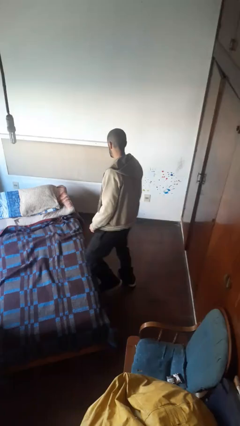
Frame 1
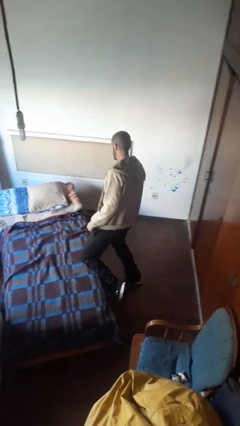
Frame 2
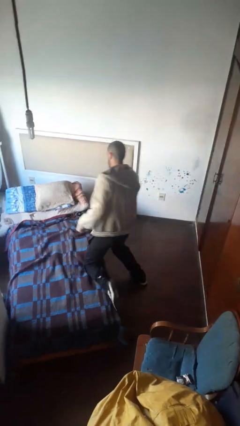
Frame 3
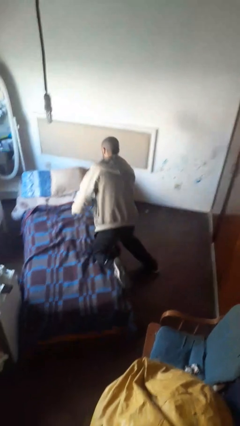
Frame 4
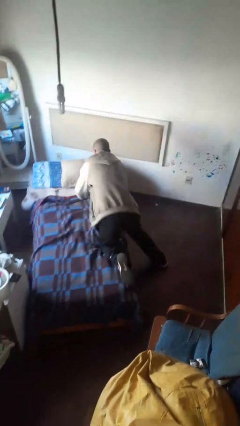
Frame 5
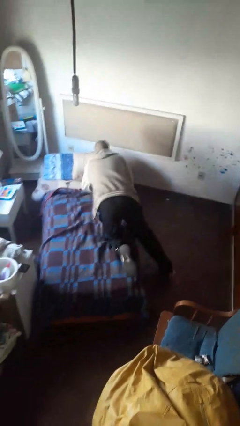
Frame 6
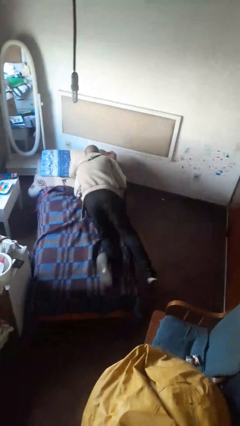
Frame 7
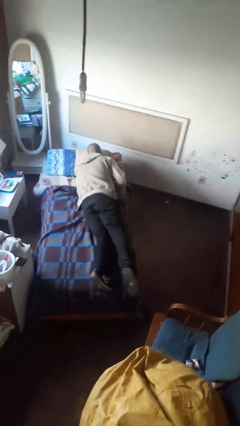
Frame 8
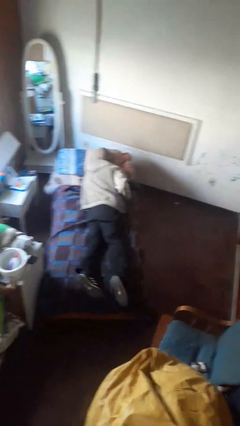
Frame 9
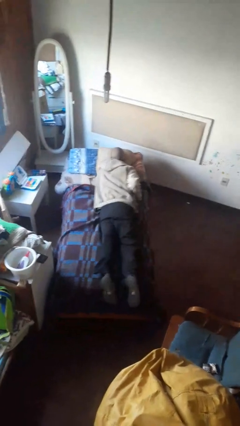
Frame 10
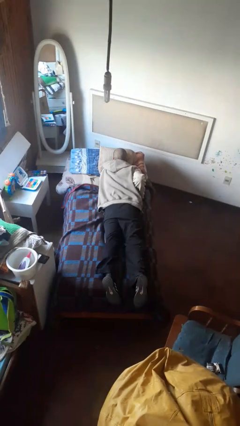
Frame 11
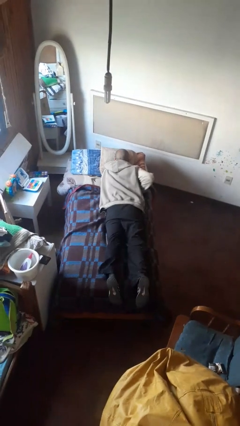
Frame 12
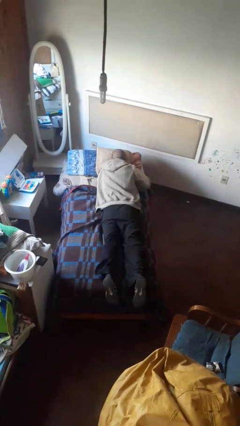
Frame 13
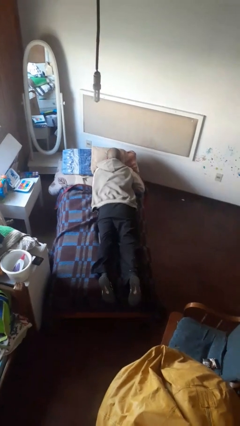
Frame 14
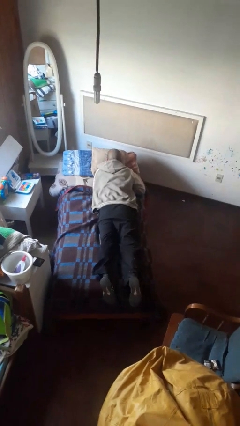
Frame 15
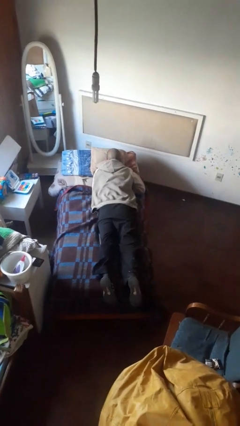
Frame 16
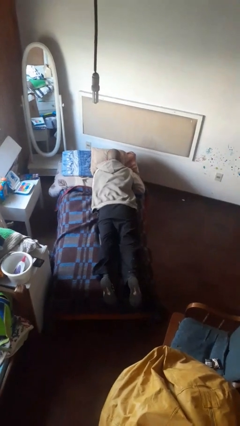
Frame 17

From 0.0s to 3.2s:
person lies down on bed

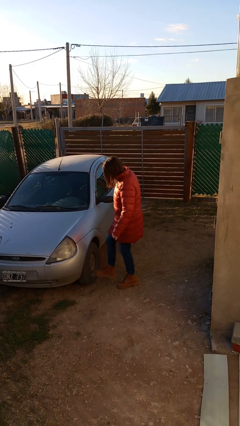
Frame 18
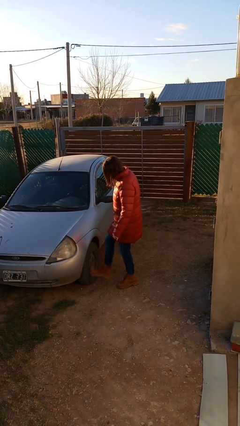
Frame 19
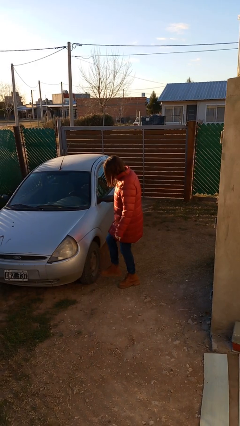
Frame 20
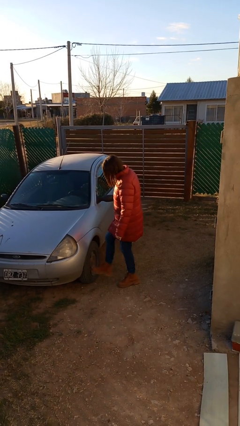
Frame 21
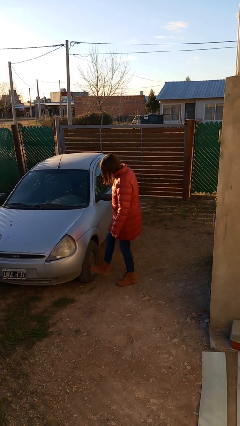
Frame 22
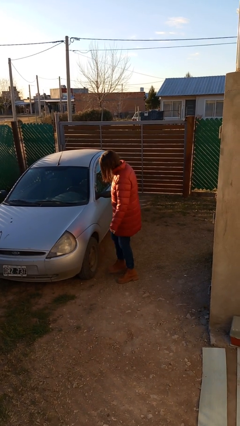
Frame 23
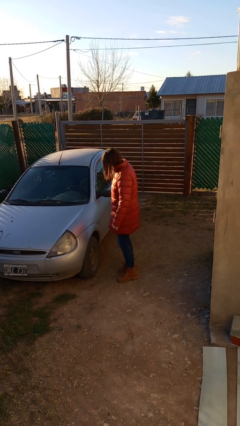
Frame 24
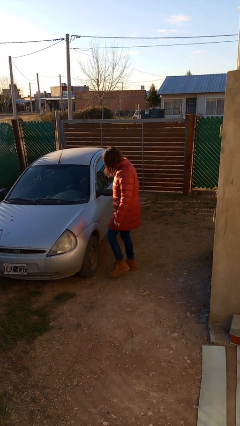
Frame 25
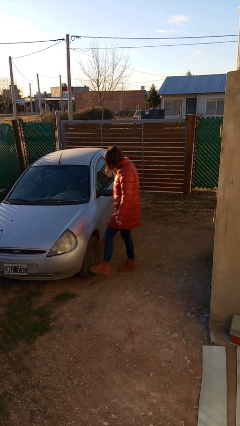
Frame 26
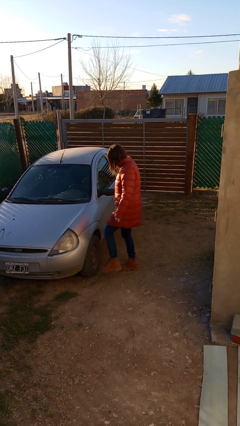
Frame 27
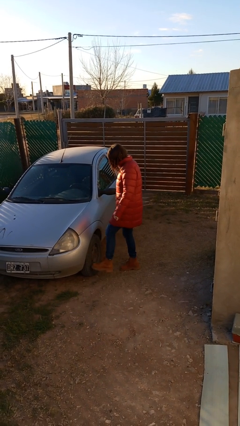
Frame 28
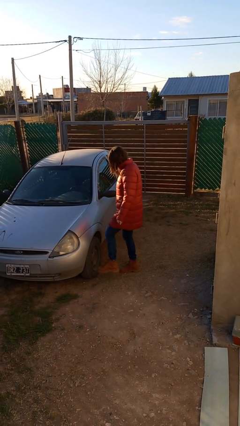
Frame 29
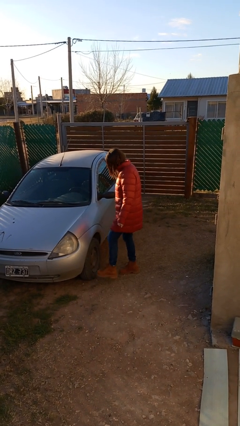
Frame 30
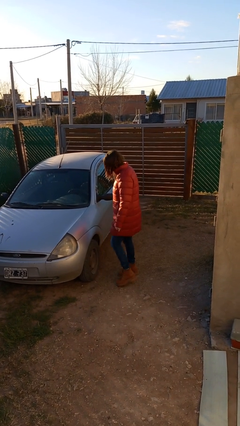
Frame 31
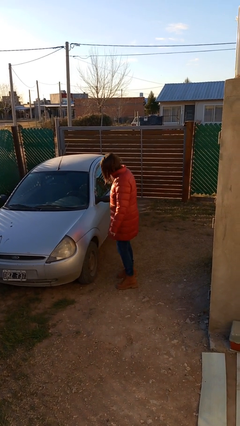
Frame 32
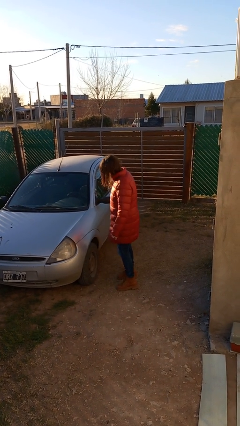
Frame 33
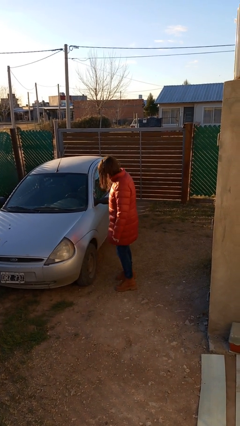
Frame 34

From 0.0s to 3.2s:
person kicks car tires

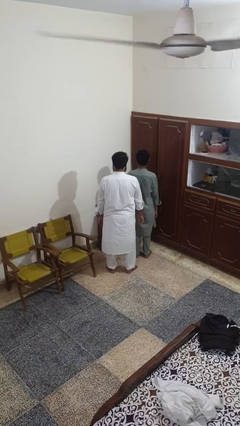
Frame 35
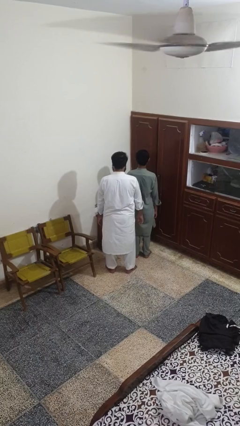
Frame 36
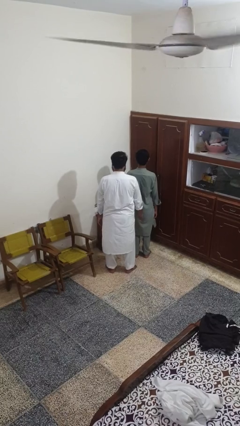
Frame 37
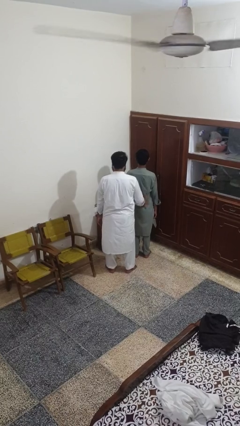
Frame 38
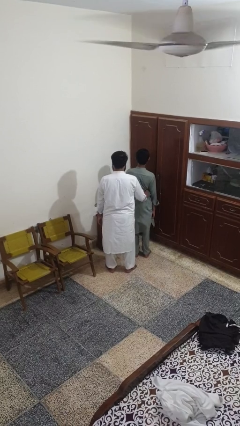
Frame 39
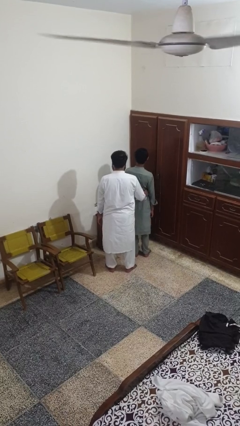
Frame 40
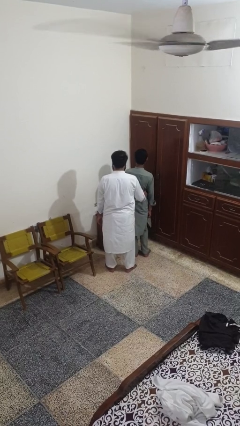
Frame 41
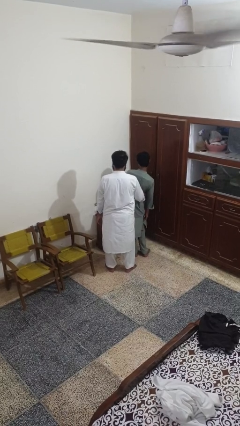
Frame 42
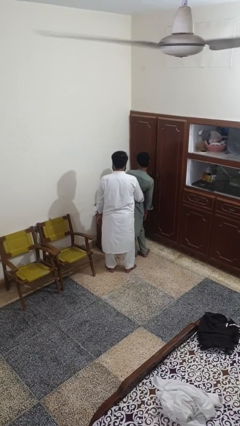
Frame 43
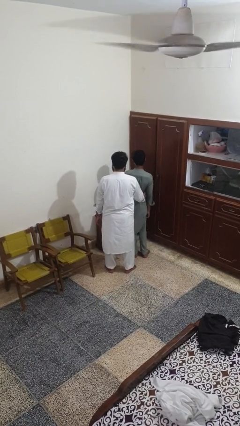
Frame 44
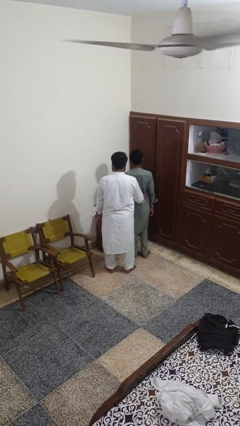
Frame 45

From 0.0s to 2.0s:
person tickles person

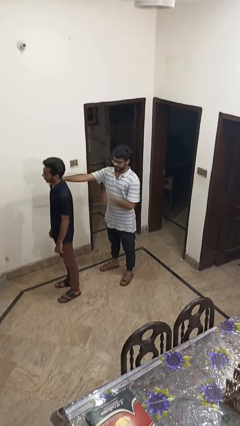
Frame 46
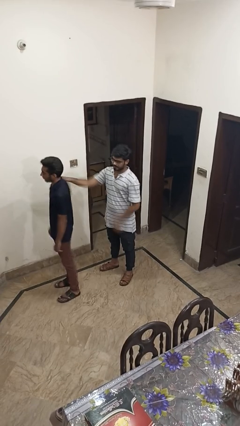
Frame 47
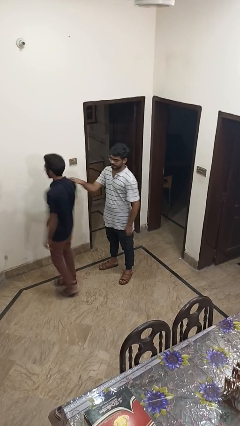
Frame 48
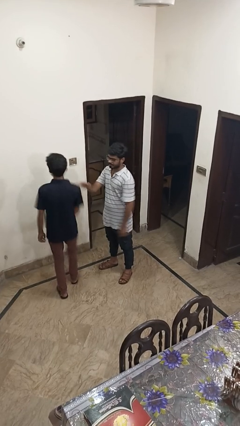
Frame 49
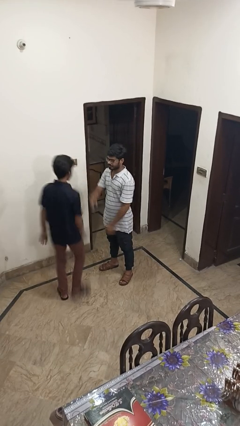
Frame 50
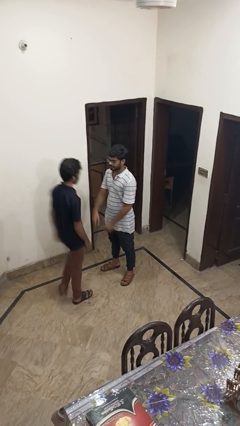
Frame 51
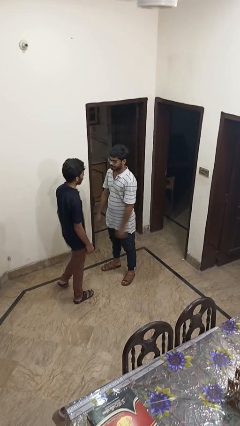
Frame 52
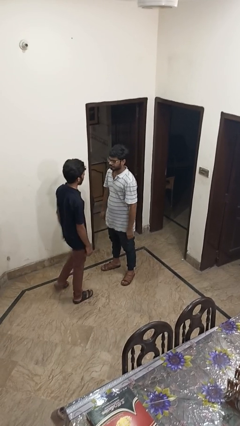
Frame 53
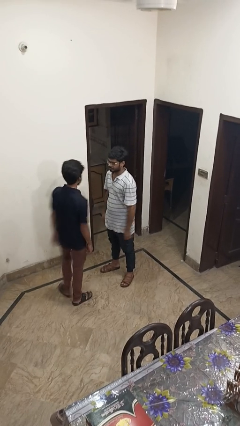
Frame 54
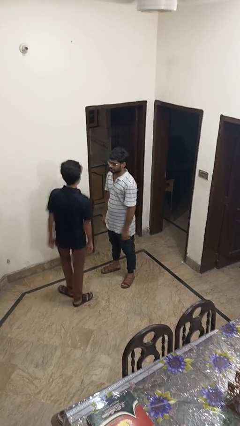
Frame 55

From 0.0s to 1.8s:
person spins person around

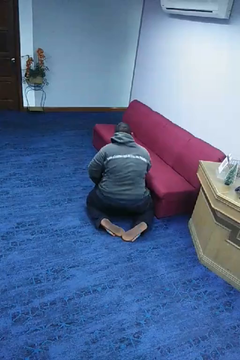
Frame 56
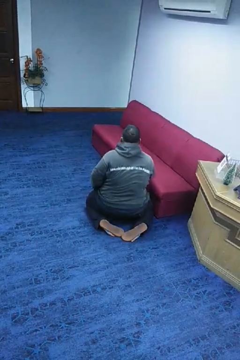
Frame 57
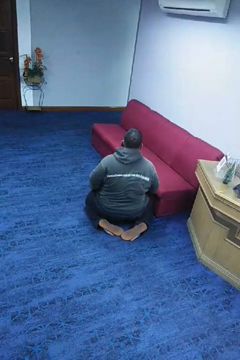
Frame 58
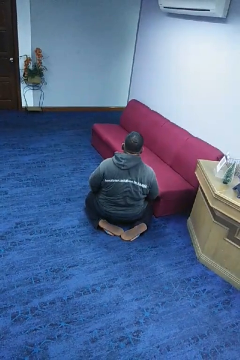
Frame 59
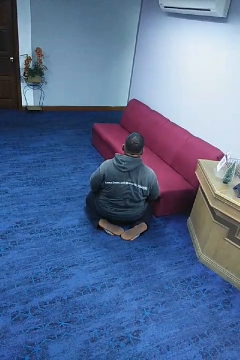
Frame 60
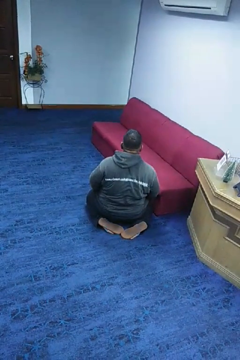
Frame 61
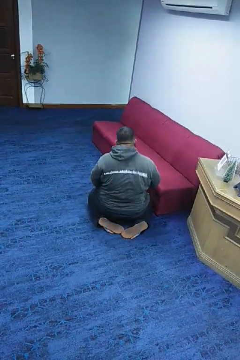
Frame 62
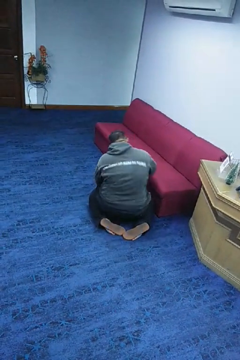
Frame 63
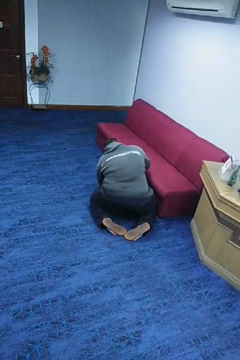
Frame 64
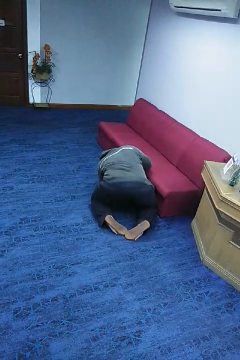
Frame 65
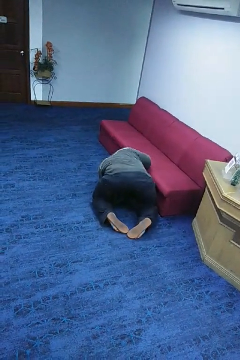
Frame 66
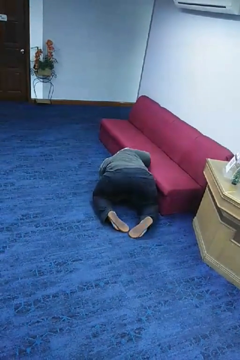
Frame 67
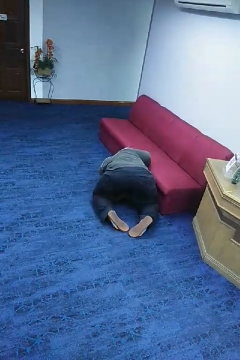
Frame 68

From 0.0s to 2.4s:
person searches under couch

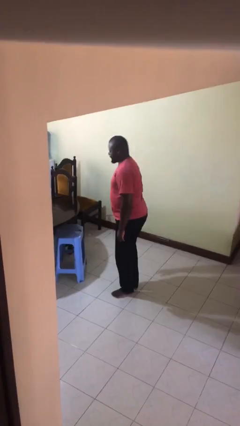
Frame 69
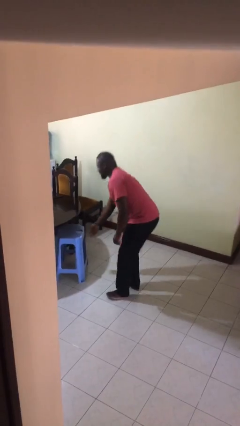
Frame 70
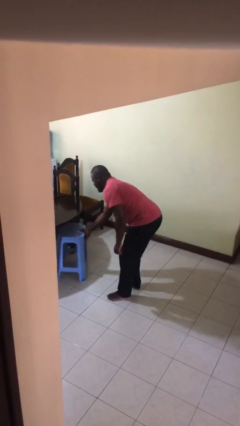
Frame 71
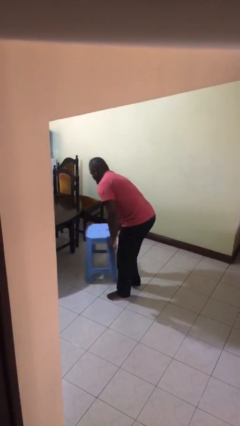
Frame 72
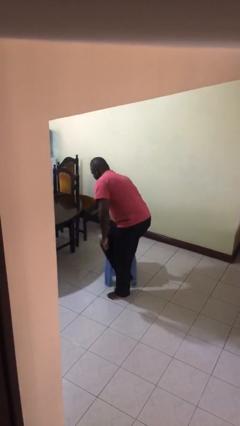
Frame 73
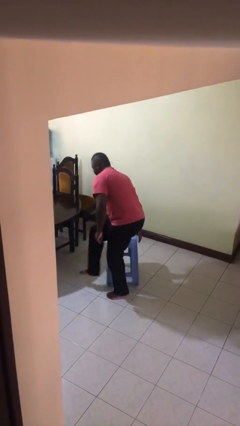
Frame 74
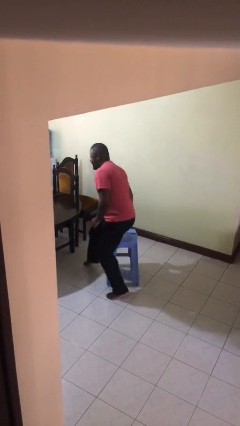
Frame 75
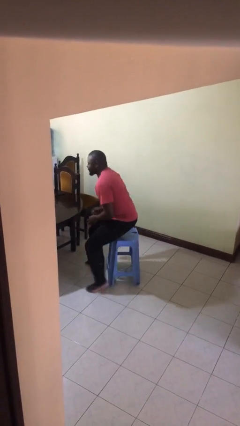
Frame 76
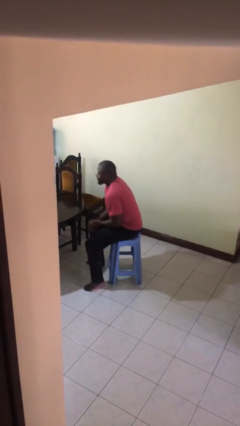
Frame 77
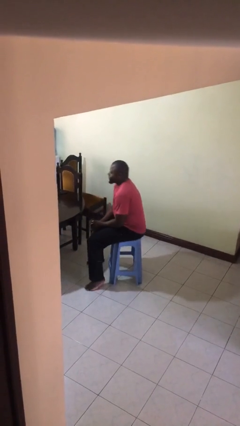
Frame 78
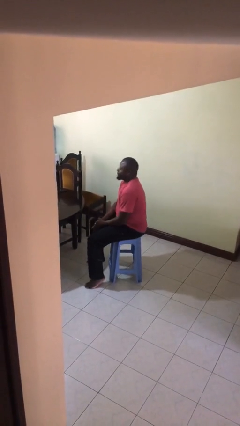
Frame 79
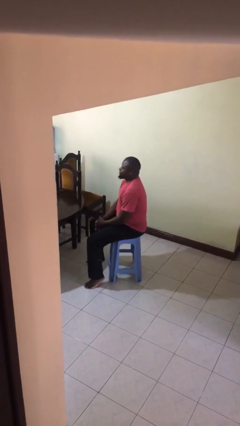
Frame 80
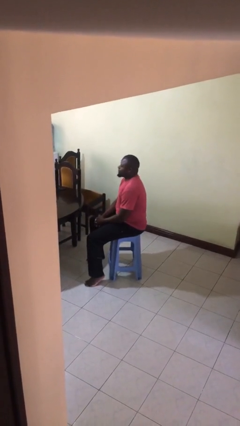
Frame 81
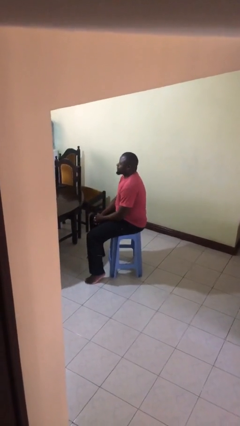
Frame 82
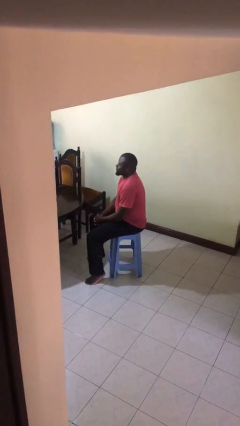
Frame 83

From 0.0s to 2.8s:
person sits down

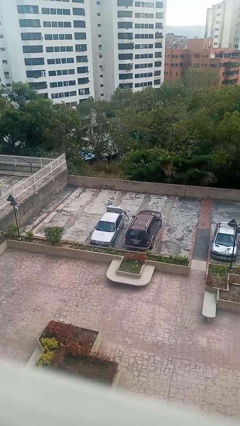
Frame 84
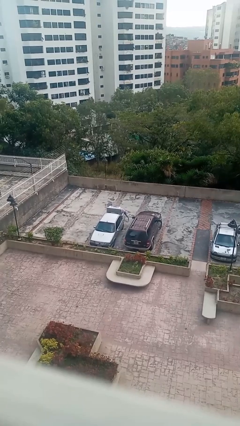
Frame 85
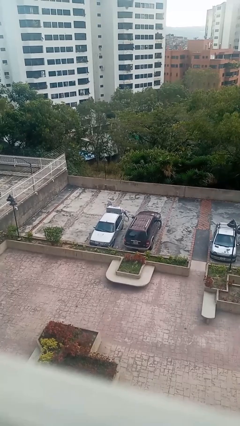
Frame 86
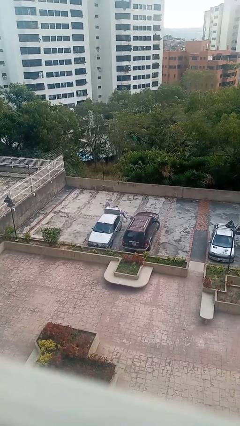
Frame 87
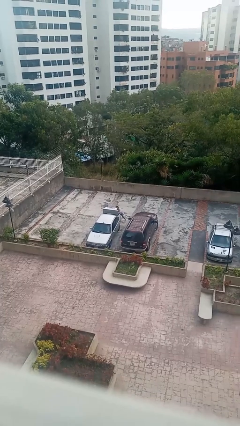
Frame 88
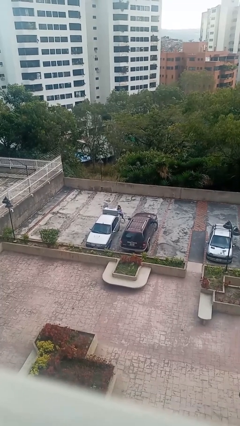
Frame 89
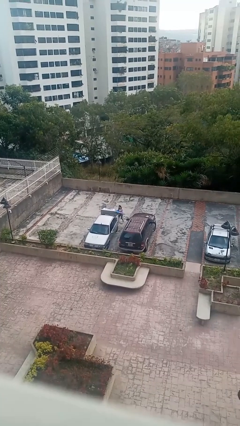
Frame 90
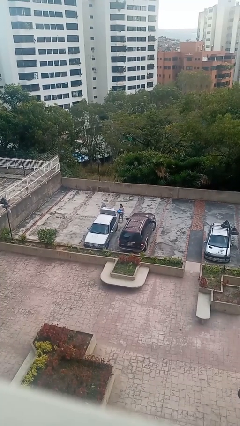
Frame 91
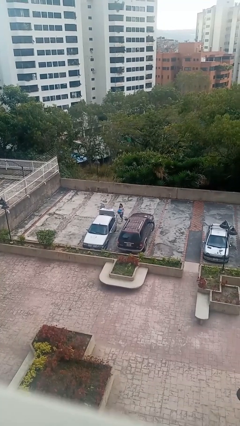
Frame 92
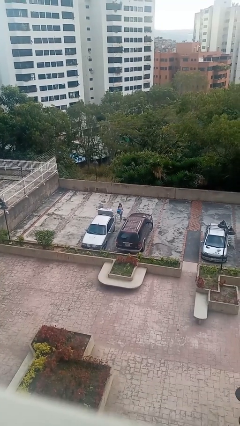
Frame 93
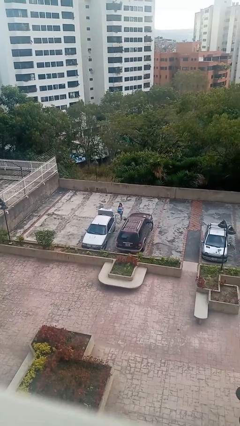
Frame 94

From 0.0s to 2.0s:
person unloads car

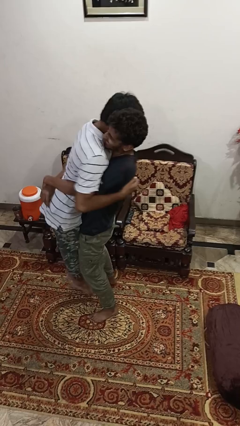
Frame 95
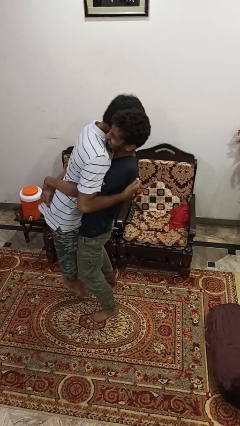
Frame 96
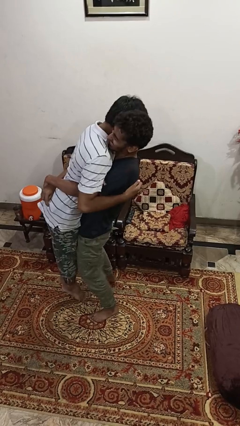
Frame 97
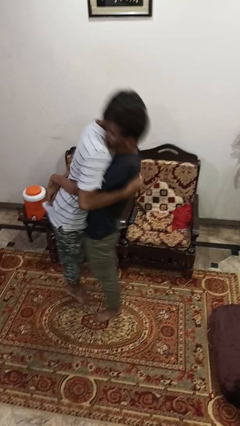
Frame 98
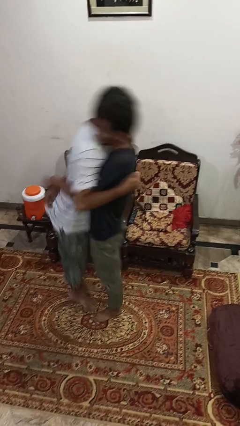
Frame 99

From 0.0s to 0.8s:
person puts down person
